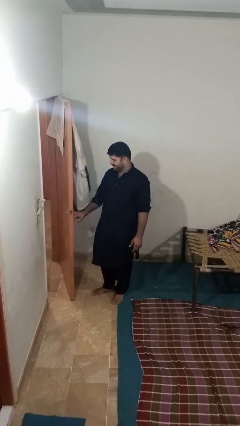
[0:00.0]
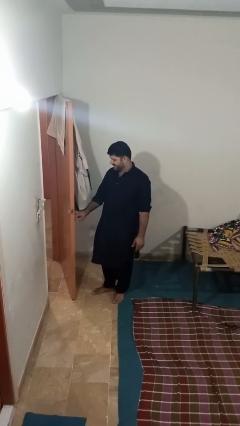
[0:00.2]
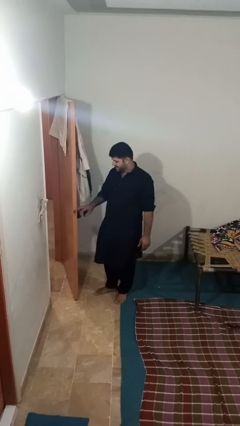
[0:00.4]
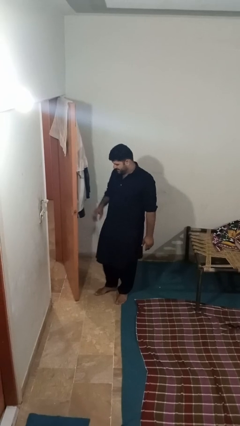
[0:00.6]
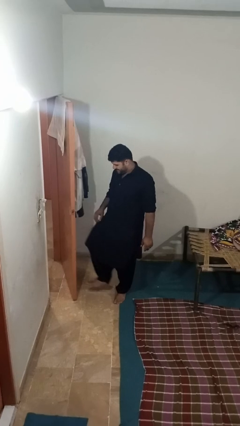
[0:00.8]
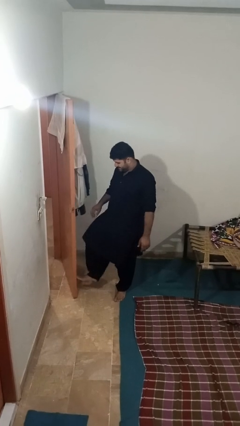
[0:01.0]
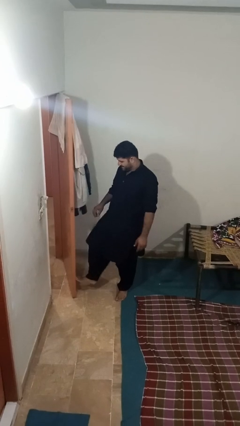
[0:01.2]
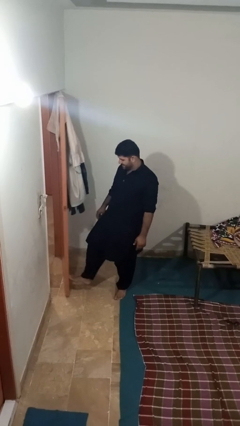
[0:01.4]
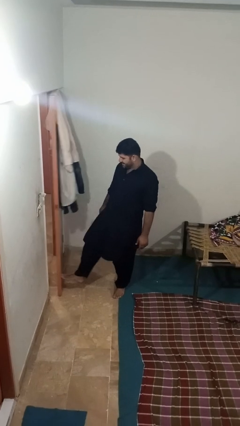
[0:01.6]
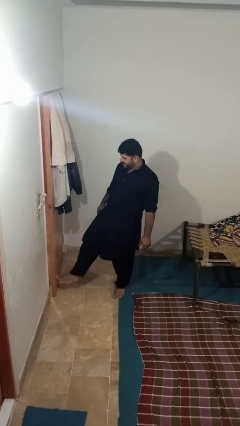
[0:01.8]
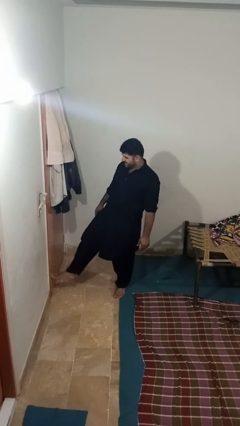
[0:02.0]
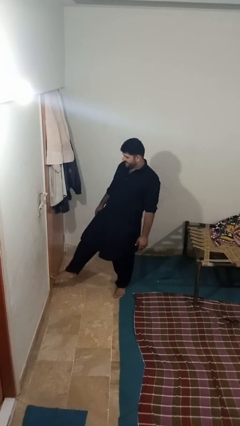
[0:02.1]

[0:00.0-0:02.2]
person closes door with foot

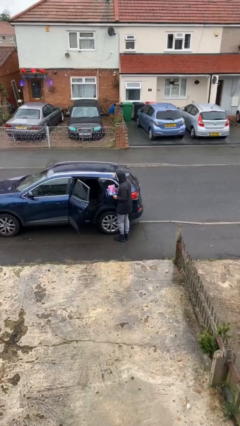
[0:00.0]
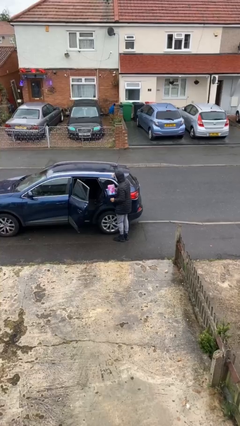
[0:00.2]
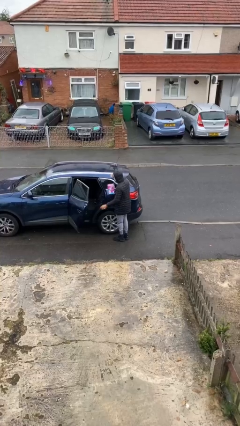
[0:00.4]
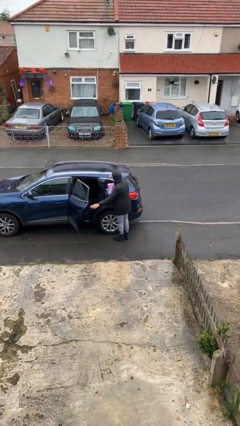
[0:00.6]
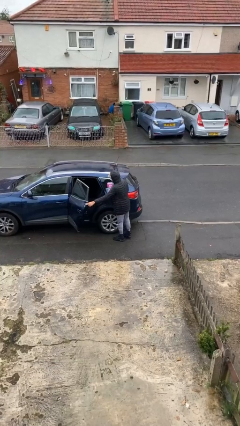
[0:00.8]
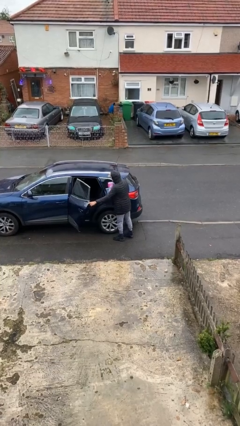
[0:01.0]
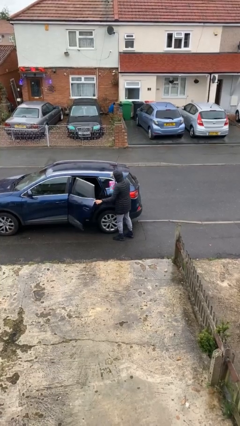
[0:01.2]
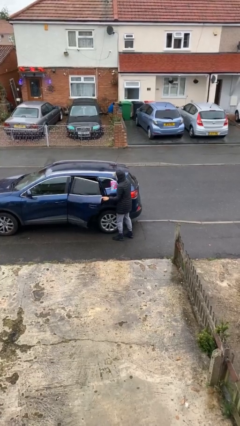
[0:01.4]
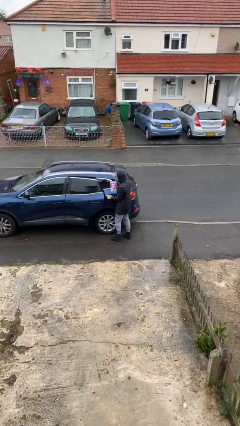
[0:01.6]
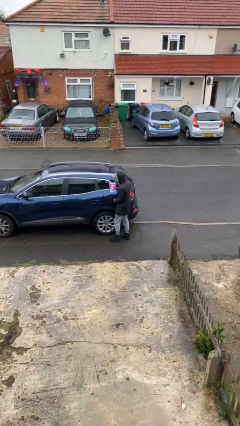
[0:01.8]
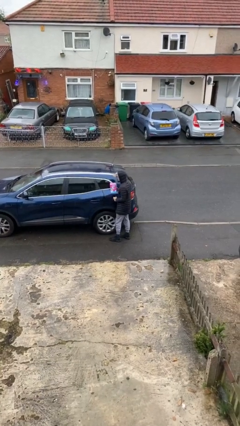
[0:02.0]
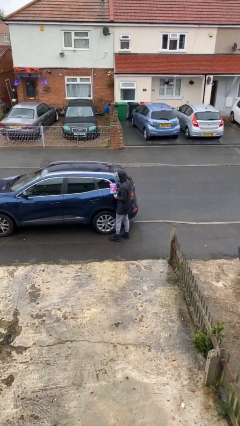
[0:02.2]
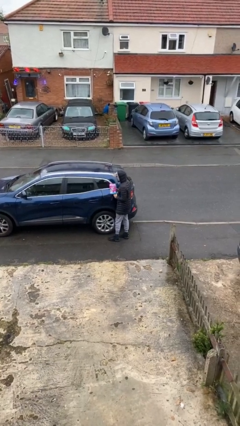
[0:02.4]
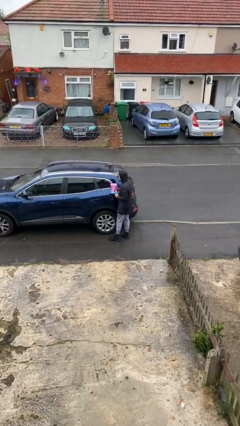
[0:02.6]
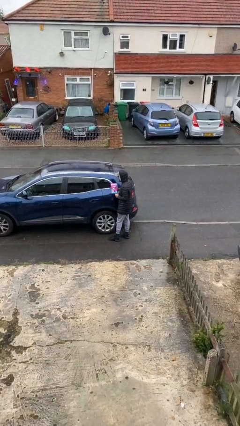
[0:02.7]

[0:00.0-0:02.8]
person closes car door

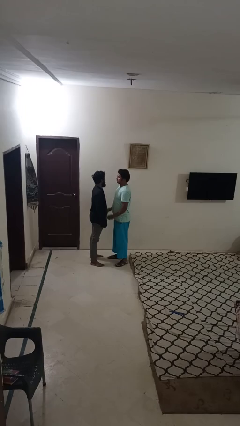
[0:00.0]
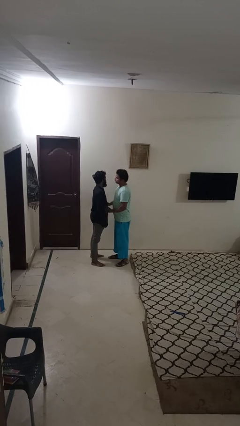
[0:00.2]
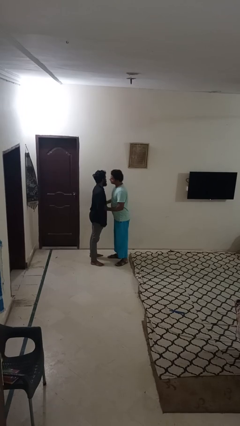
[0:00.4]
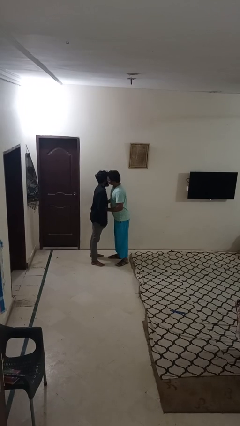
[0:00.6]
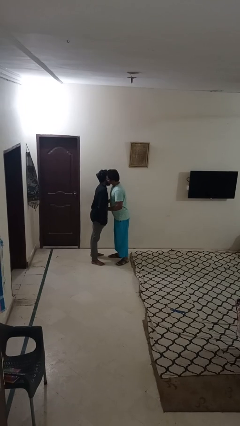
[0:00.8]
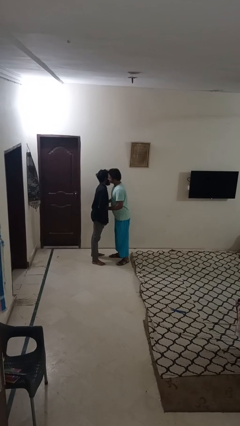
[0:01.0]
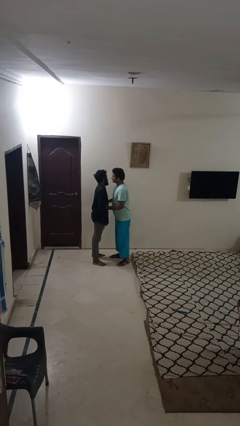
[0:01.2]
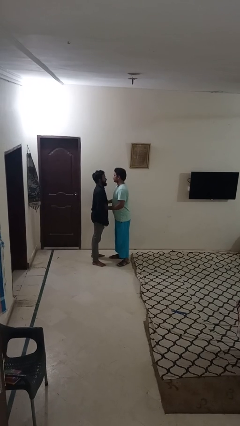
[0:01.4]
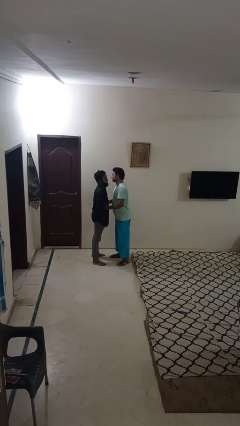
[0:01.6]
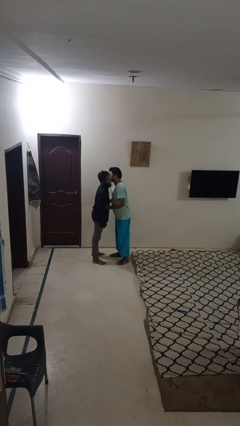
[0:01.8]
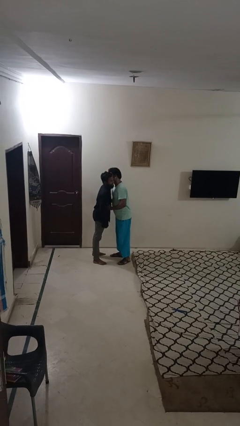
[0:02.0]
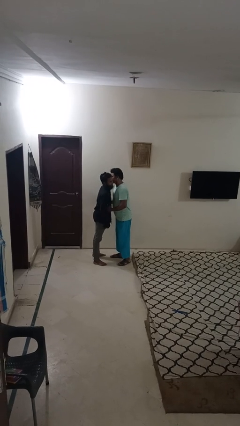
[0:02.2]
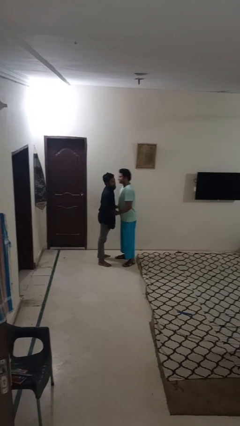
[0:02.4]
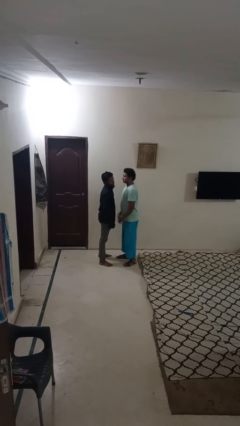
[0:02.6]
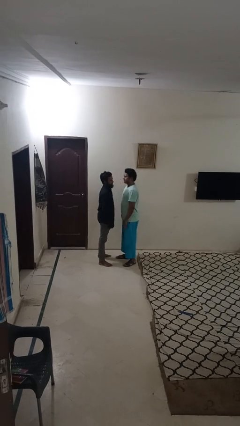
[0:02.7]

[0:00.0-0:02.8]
person kisses cheek of person

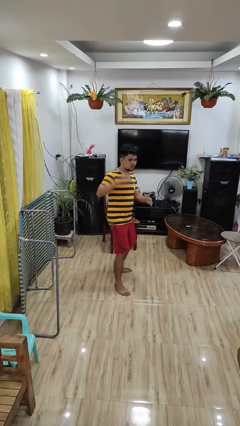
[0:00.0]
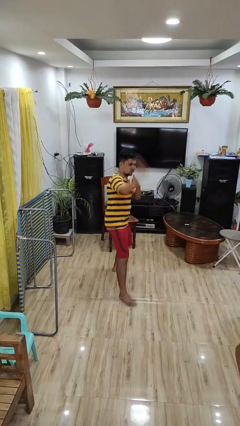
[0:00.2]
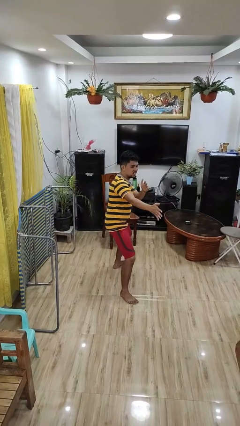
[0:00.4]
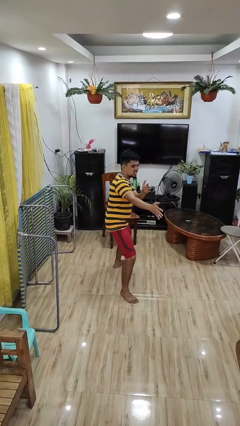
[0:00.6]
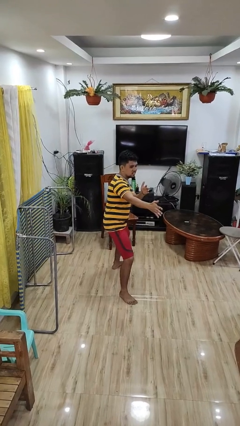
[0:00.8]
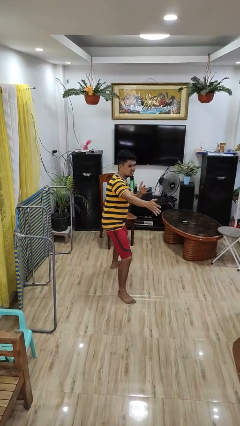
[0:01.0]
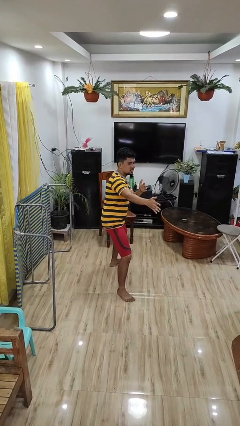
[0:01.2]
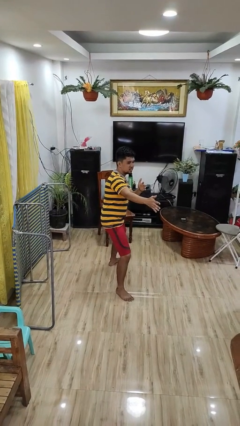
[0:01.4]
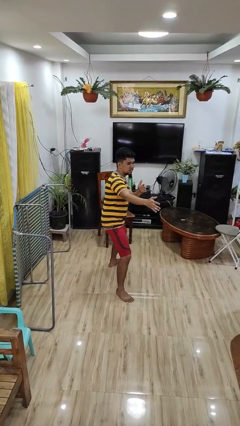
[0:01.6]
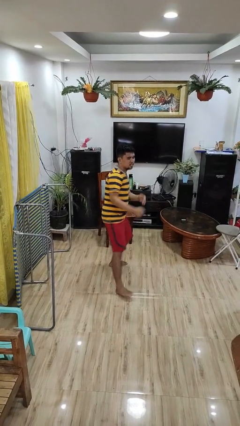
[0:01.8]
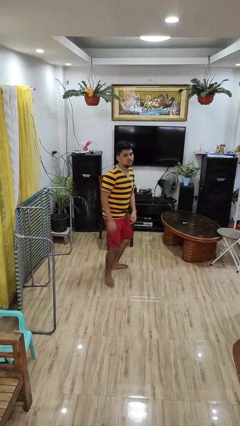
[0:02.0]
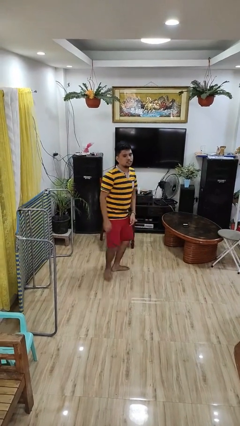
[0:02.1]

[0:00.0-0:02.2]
person karate chop

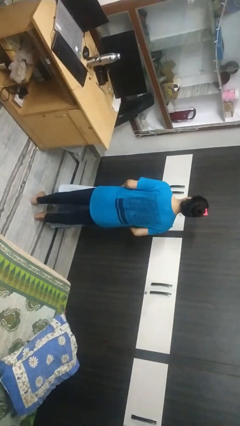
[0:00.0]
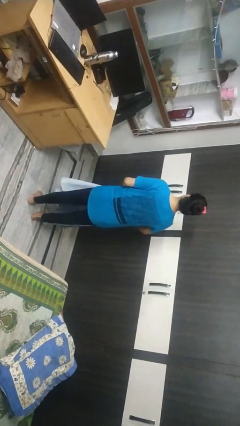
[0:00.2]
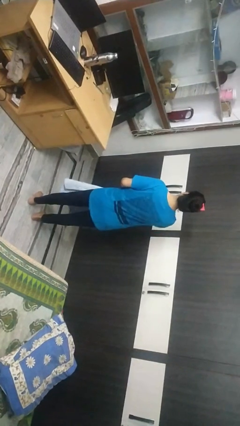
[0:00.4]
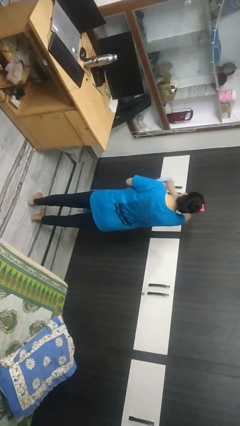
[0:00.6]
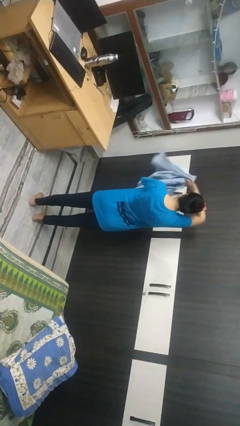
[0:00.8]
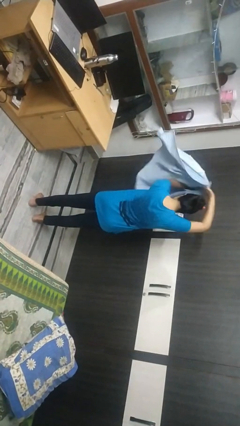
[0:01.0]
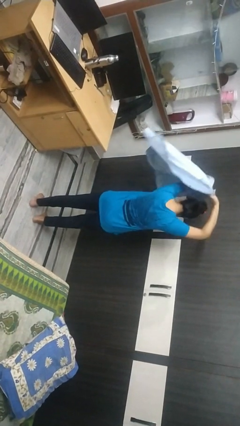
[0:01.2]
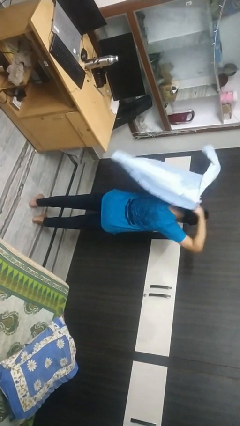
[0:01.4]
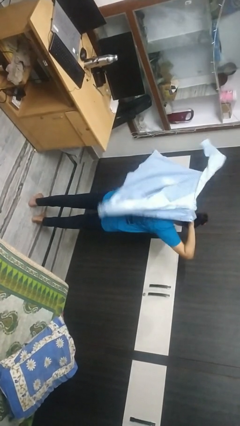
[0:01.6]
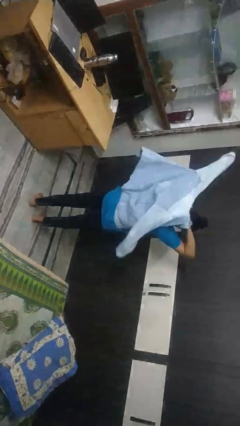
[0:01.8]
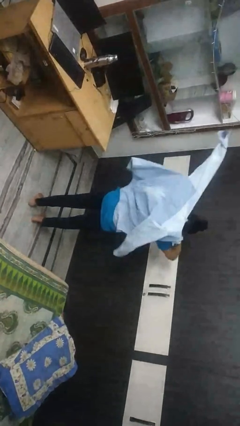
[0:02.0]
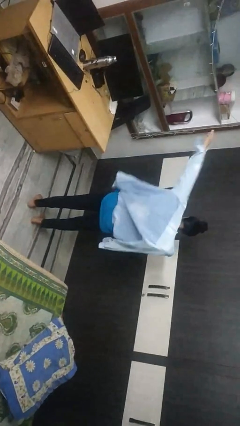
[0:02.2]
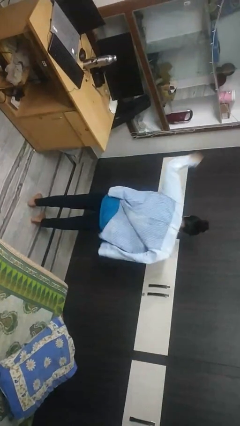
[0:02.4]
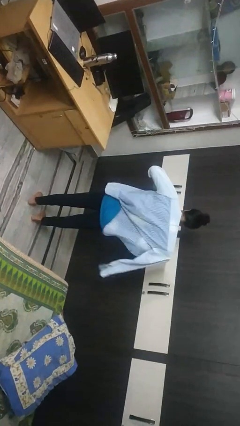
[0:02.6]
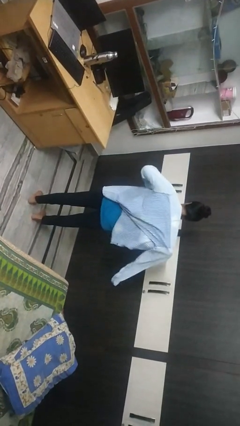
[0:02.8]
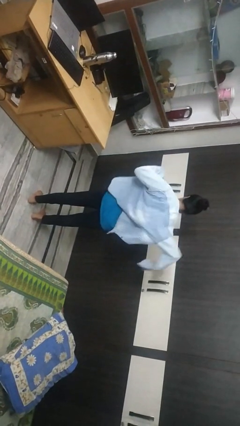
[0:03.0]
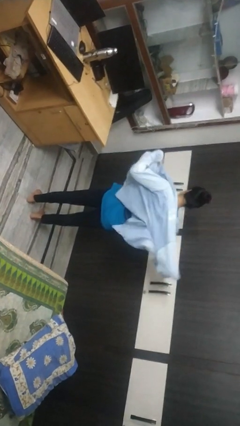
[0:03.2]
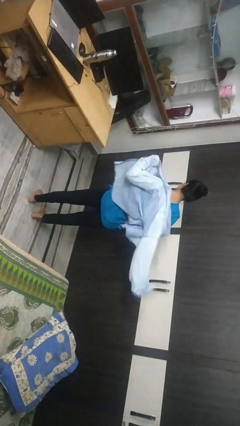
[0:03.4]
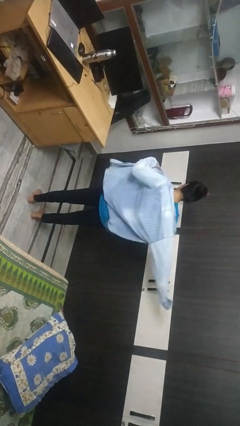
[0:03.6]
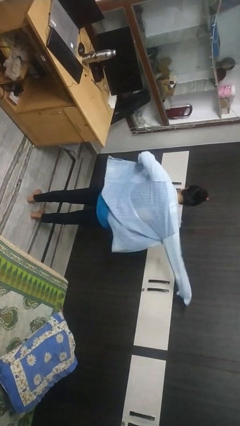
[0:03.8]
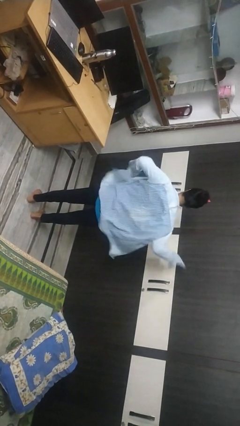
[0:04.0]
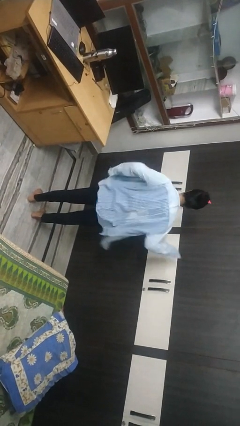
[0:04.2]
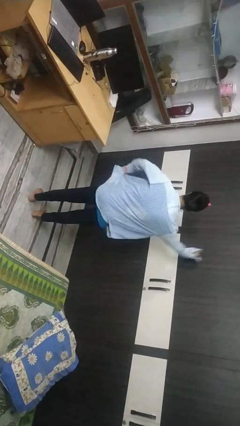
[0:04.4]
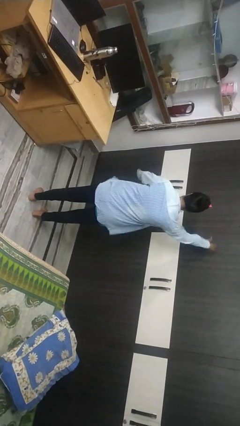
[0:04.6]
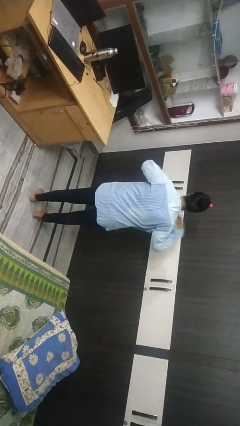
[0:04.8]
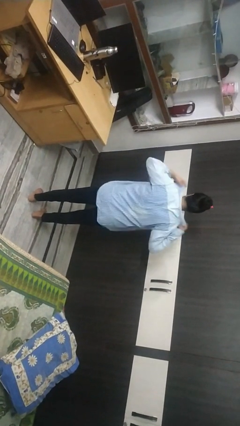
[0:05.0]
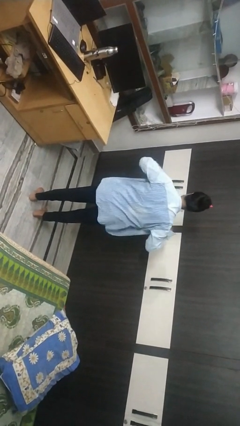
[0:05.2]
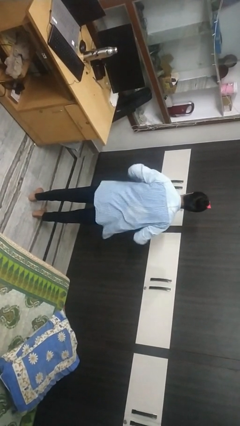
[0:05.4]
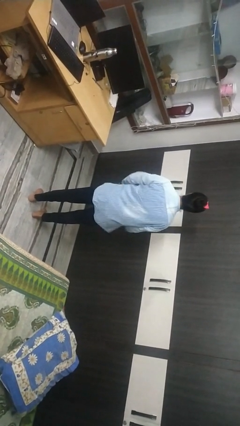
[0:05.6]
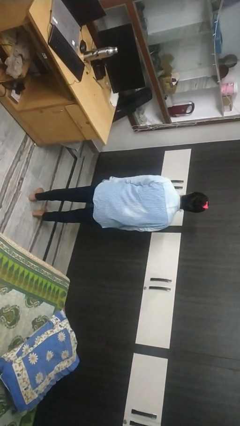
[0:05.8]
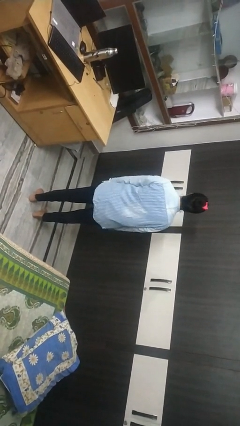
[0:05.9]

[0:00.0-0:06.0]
person puts on shirt

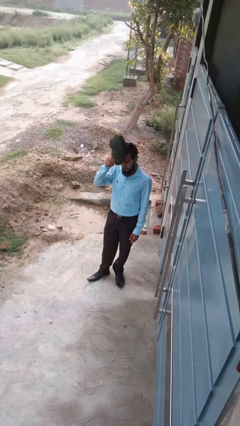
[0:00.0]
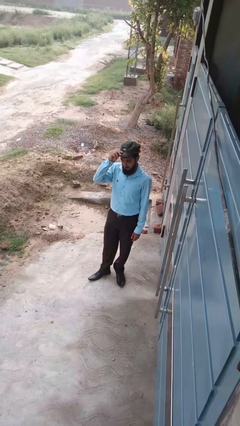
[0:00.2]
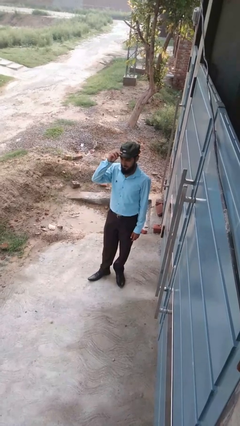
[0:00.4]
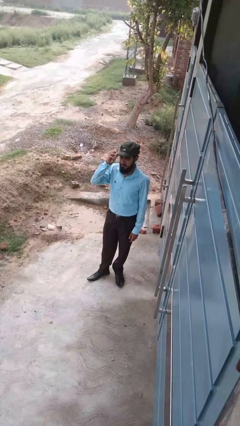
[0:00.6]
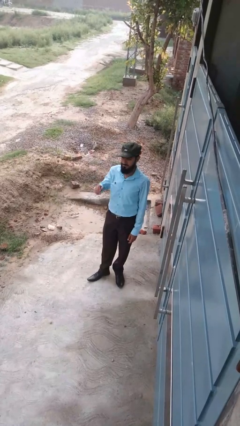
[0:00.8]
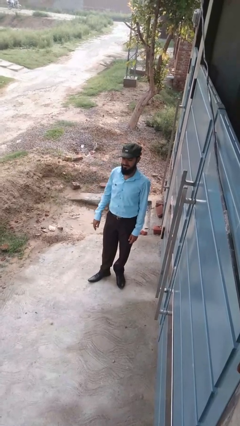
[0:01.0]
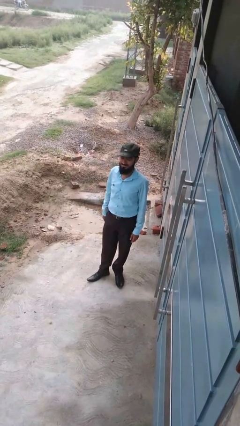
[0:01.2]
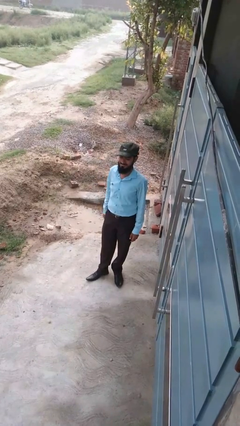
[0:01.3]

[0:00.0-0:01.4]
person puts on hat
